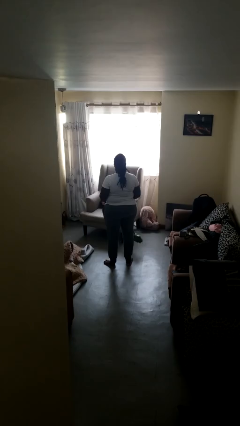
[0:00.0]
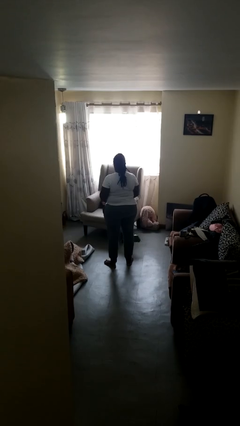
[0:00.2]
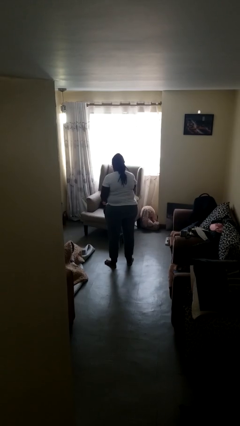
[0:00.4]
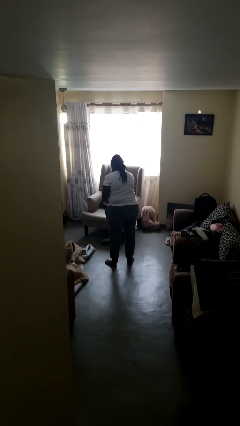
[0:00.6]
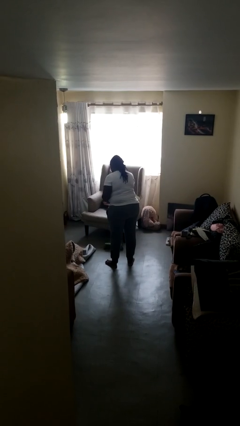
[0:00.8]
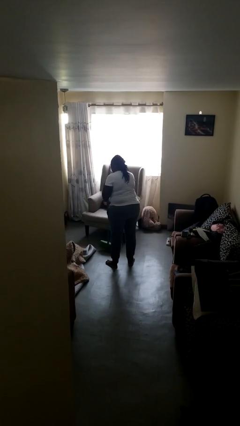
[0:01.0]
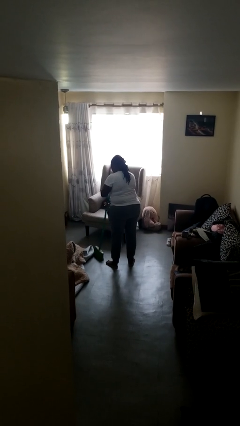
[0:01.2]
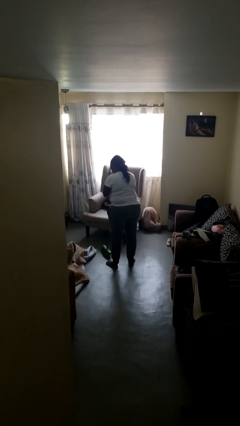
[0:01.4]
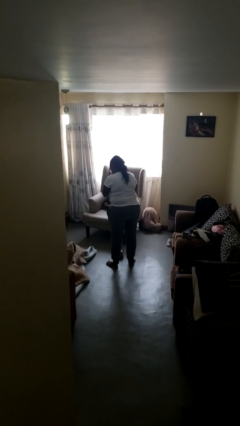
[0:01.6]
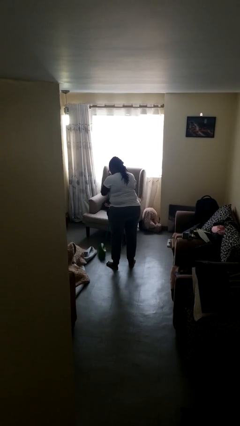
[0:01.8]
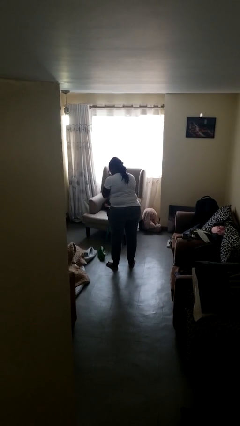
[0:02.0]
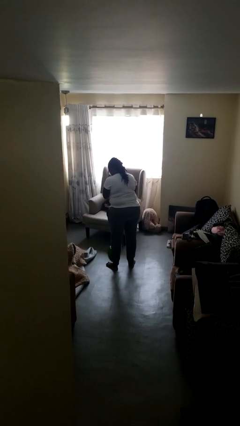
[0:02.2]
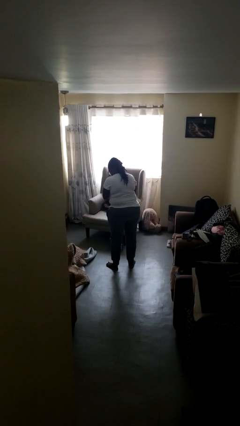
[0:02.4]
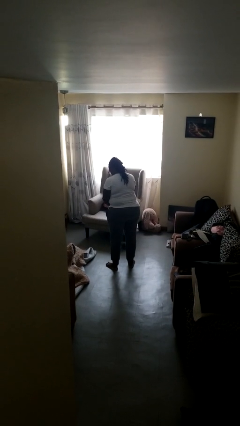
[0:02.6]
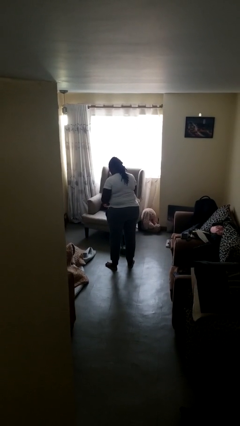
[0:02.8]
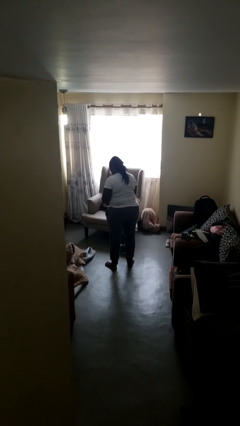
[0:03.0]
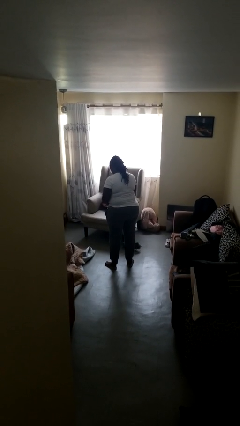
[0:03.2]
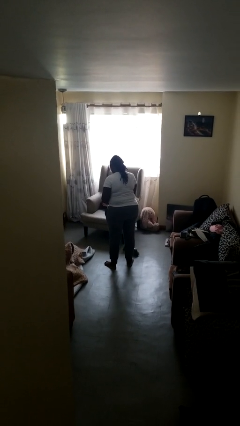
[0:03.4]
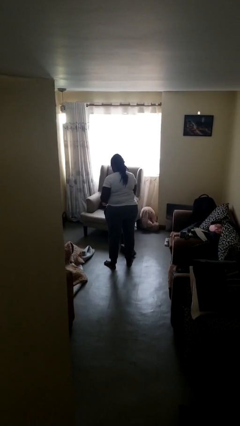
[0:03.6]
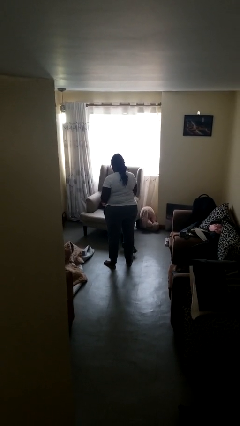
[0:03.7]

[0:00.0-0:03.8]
person sweeps floor

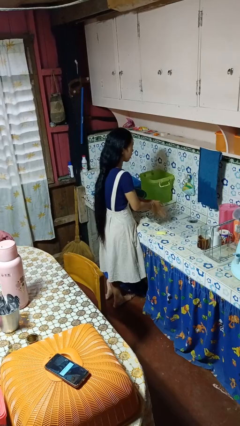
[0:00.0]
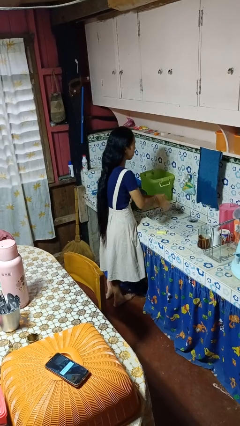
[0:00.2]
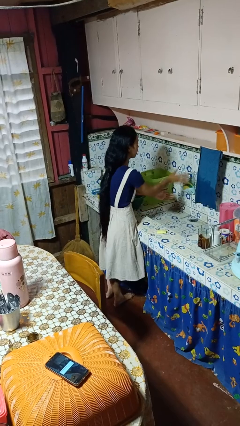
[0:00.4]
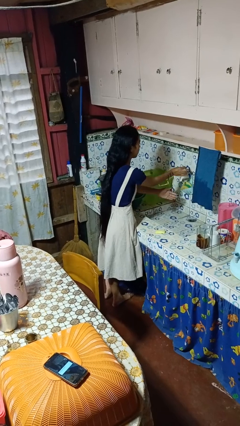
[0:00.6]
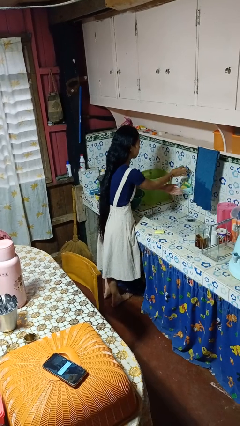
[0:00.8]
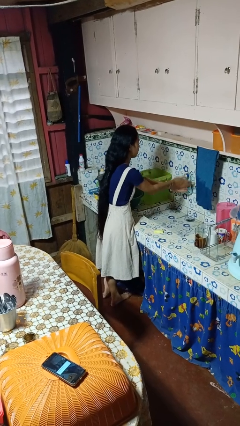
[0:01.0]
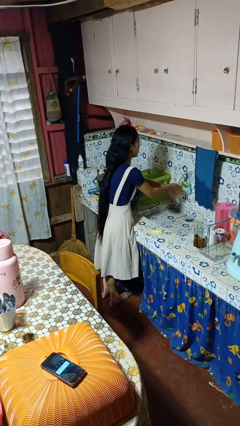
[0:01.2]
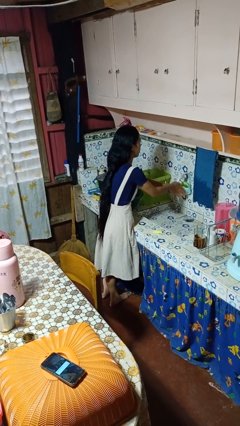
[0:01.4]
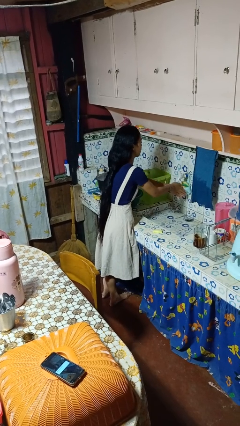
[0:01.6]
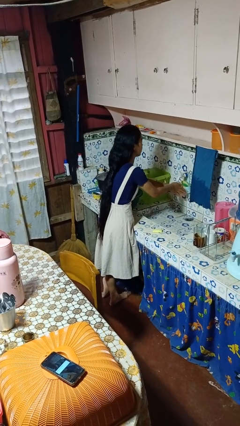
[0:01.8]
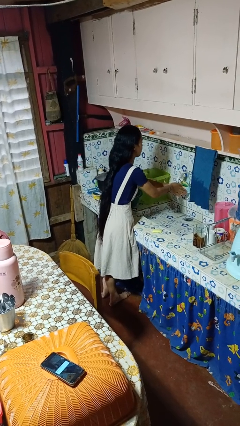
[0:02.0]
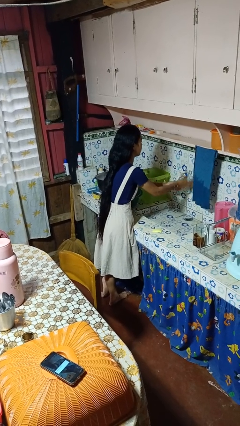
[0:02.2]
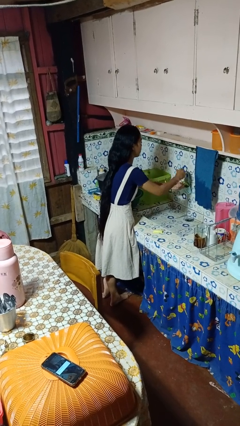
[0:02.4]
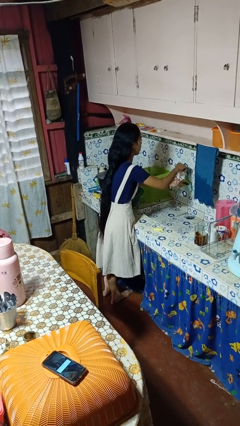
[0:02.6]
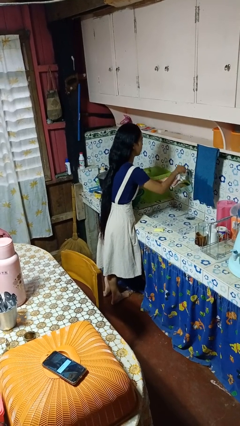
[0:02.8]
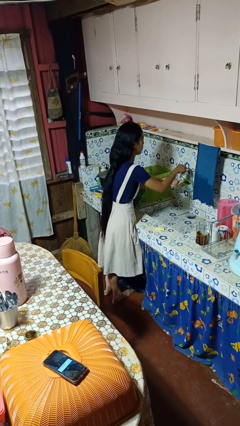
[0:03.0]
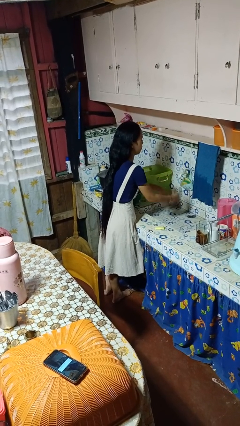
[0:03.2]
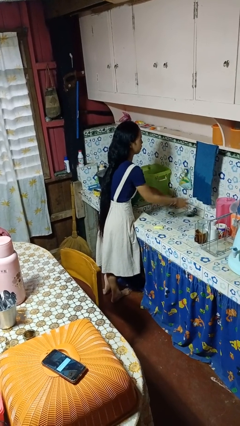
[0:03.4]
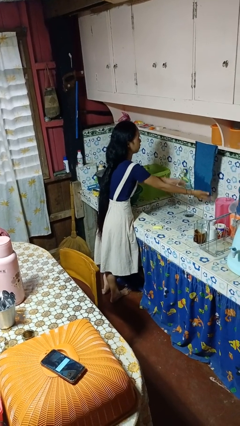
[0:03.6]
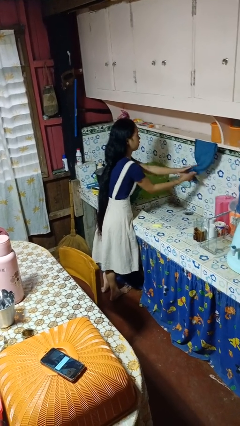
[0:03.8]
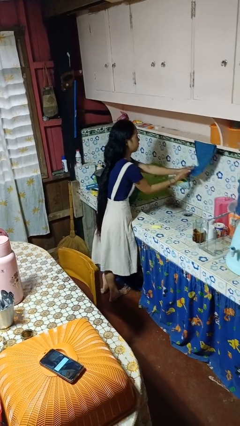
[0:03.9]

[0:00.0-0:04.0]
person washes hands

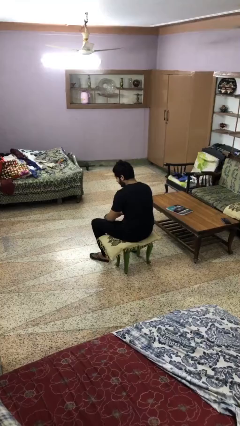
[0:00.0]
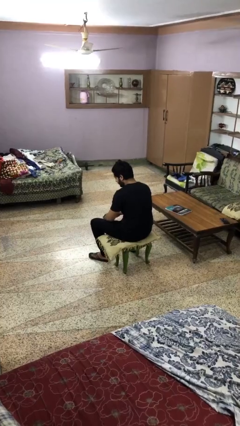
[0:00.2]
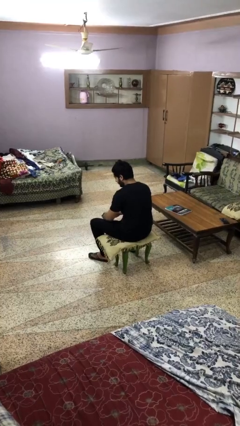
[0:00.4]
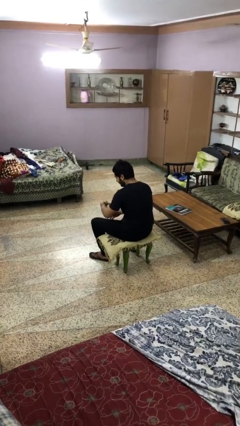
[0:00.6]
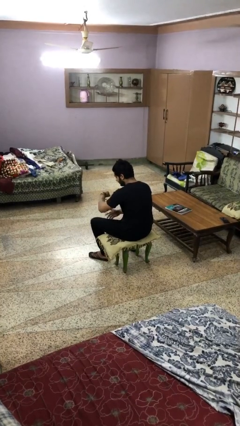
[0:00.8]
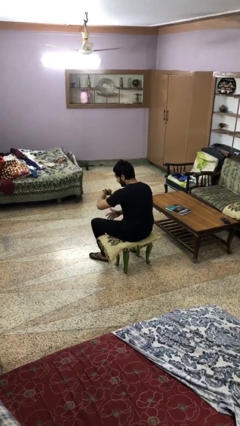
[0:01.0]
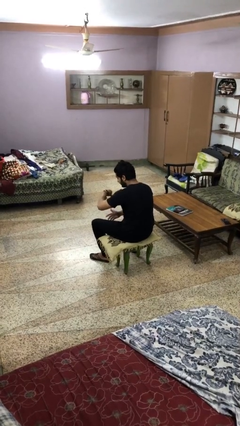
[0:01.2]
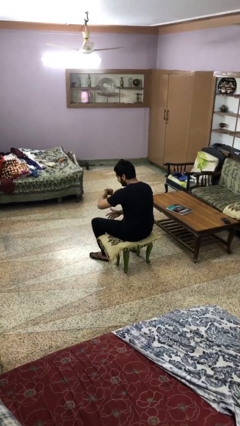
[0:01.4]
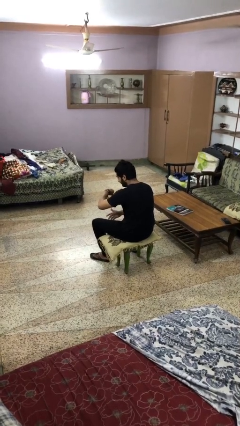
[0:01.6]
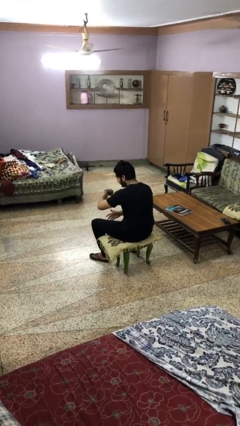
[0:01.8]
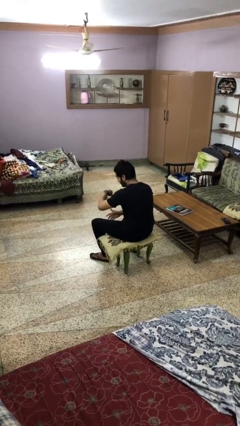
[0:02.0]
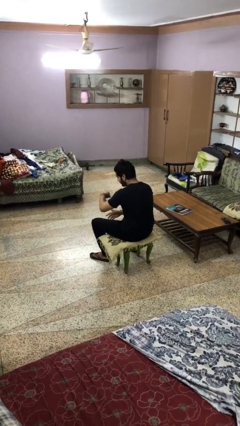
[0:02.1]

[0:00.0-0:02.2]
person looks at wristwatch

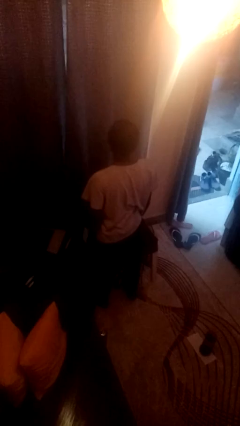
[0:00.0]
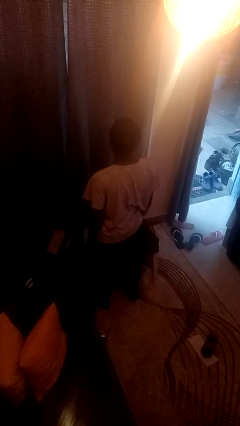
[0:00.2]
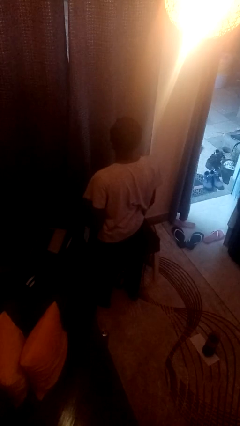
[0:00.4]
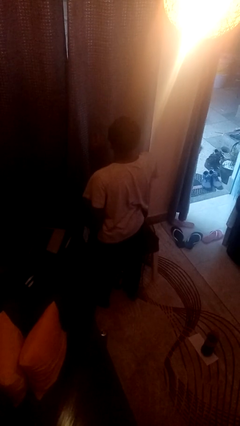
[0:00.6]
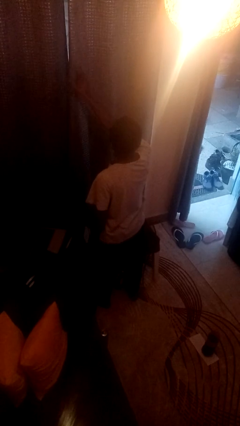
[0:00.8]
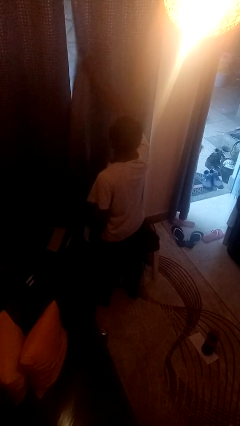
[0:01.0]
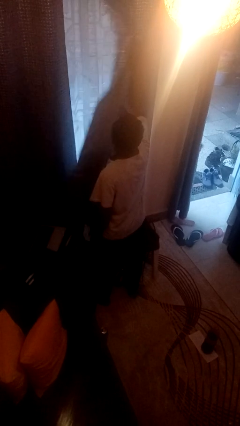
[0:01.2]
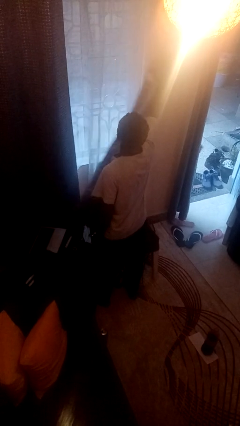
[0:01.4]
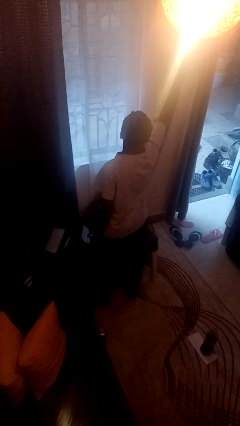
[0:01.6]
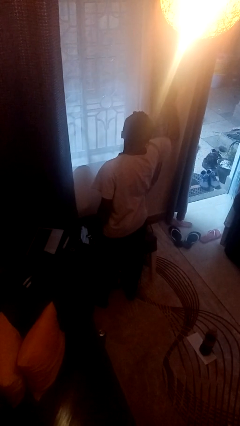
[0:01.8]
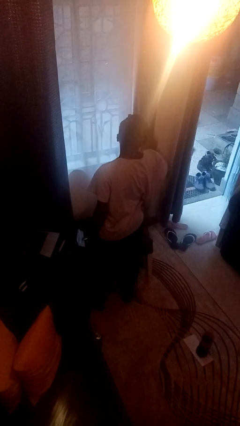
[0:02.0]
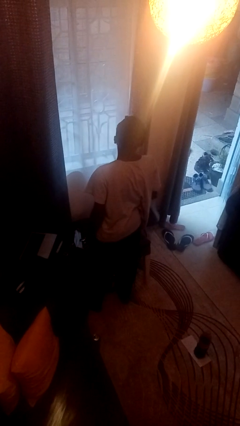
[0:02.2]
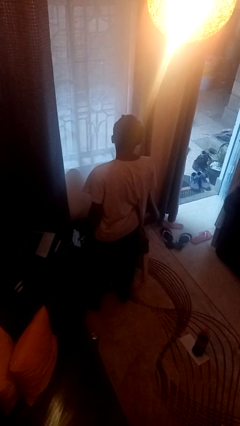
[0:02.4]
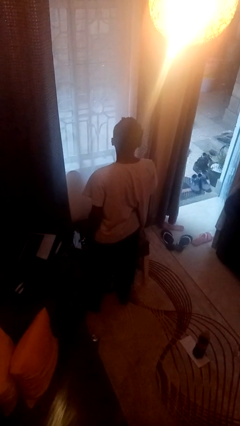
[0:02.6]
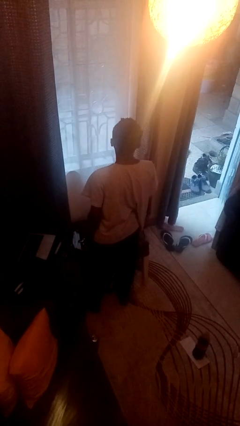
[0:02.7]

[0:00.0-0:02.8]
person opens curtains

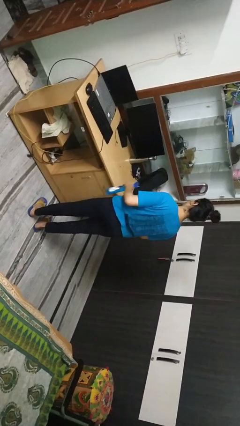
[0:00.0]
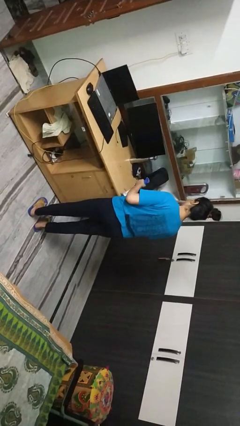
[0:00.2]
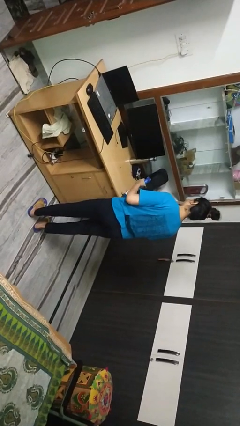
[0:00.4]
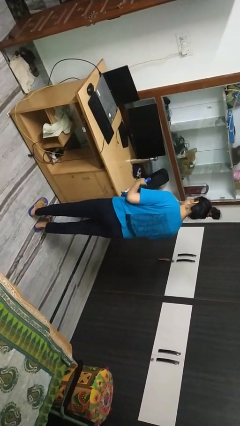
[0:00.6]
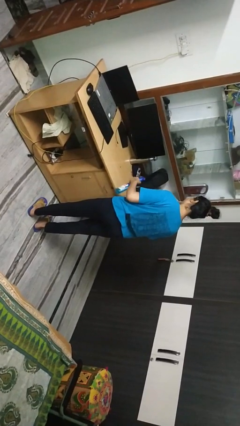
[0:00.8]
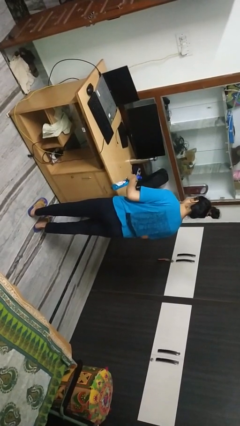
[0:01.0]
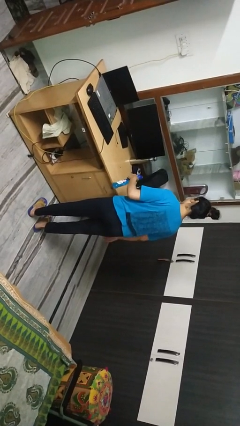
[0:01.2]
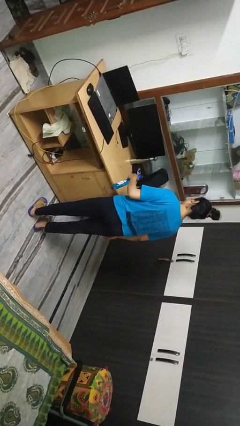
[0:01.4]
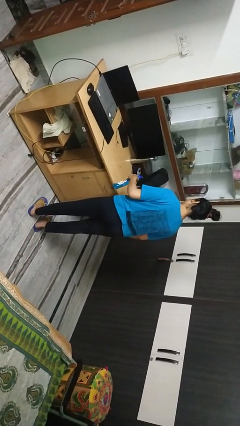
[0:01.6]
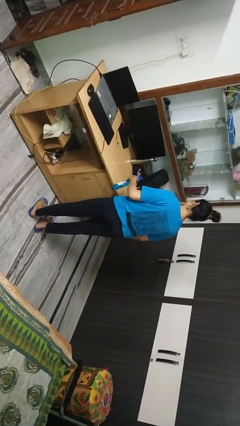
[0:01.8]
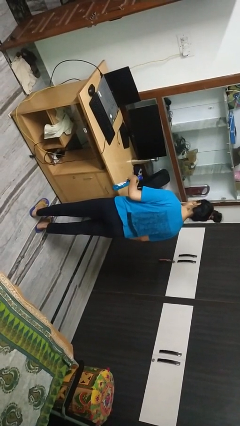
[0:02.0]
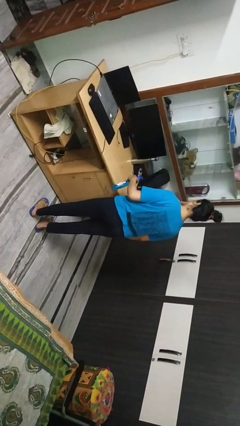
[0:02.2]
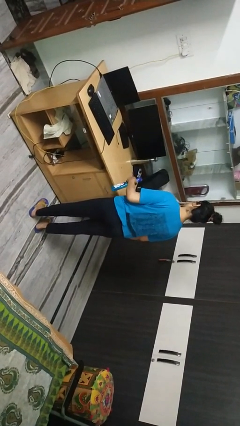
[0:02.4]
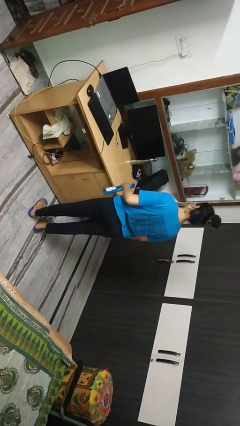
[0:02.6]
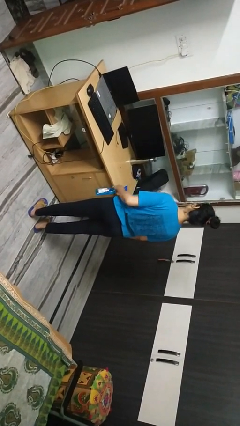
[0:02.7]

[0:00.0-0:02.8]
person sprays from bottle

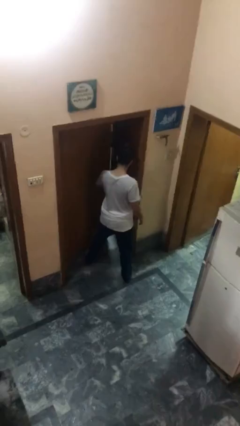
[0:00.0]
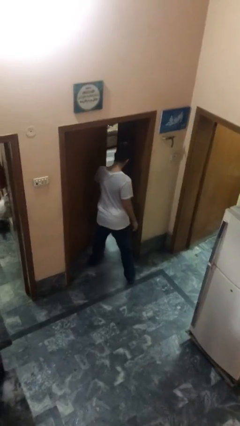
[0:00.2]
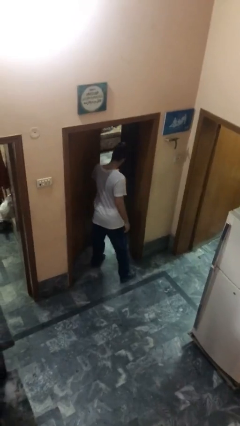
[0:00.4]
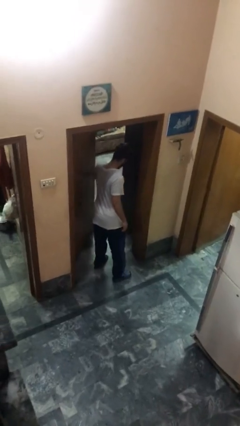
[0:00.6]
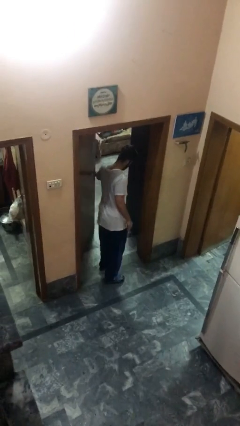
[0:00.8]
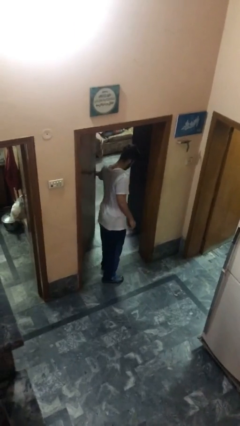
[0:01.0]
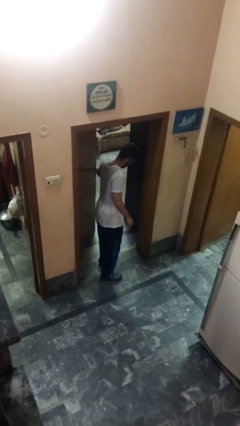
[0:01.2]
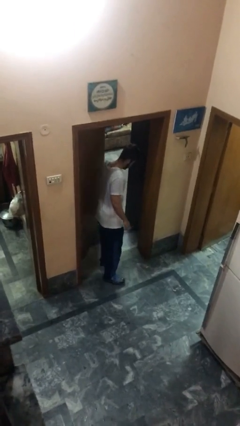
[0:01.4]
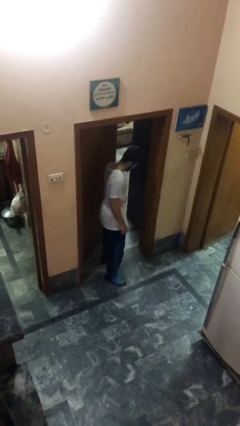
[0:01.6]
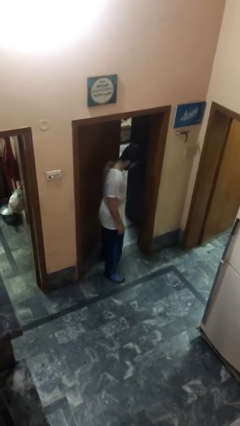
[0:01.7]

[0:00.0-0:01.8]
person opens facility door
